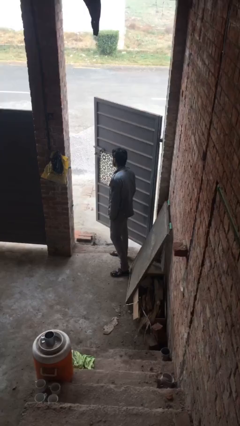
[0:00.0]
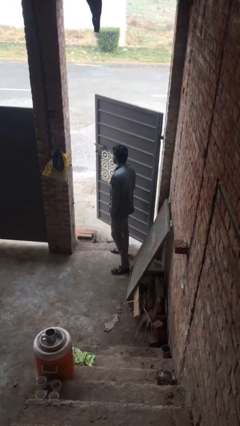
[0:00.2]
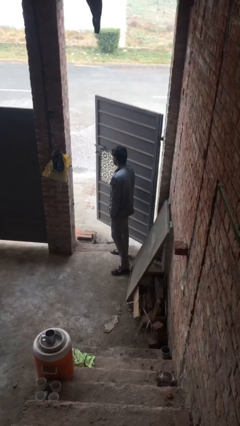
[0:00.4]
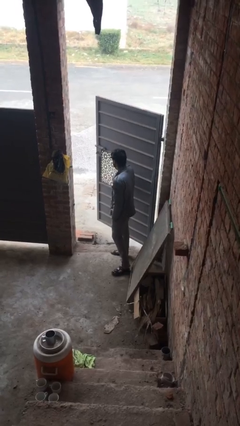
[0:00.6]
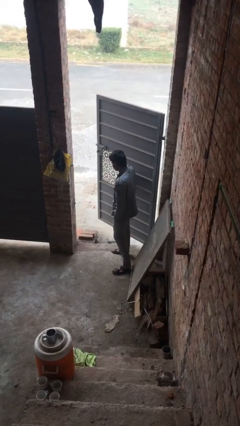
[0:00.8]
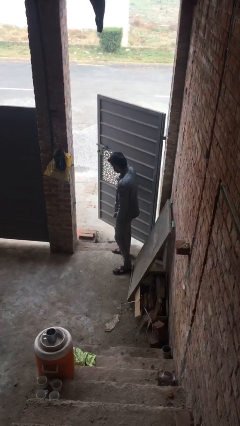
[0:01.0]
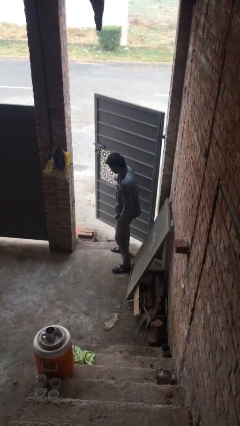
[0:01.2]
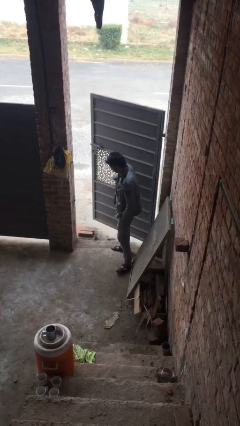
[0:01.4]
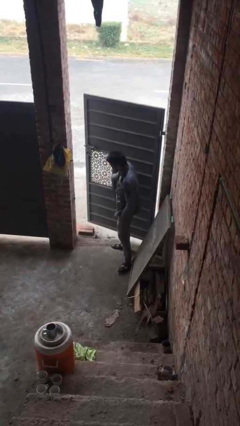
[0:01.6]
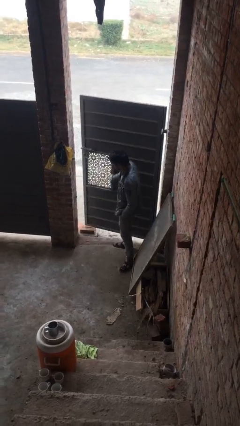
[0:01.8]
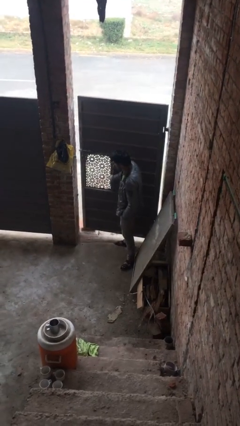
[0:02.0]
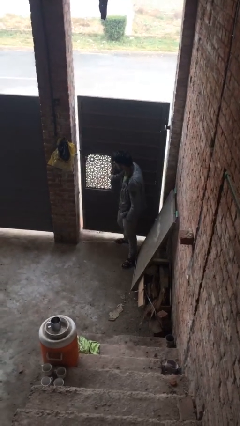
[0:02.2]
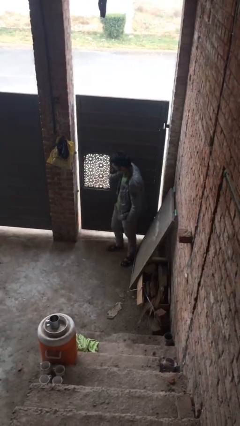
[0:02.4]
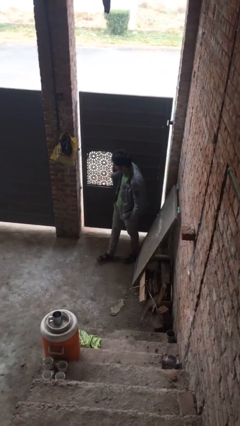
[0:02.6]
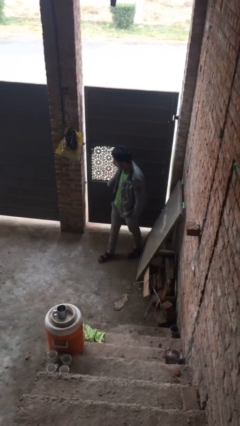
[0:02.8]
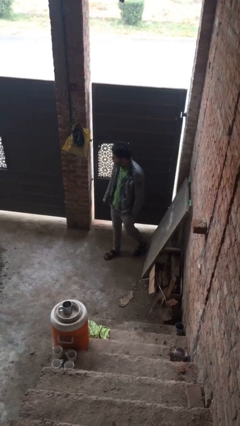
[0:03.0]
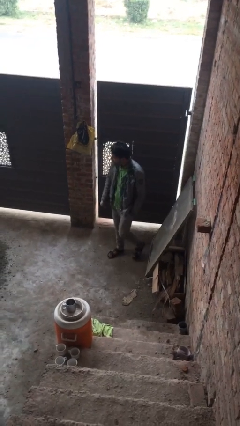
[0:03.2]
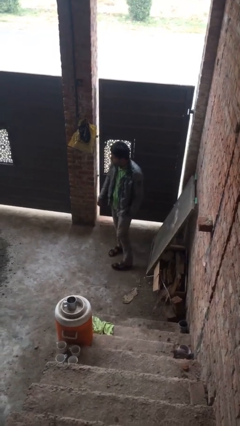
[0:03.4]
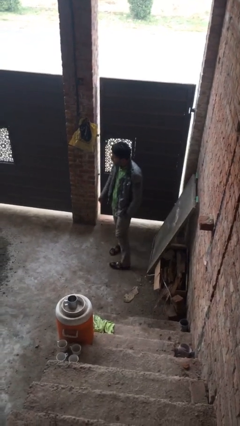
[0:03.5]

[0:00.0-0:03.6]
person closes facility door

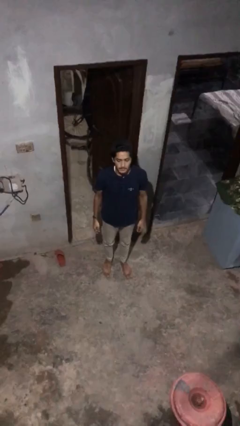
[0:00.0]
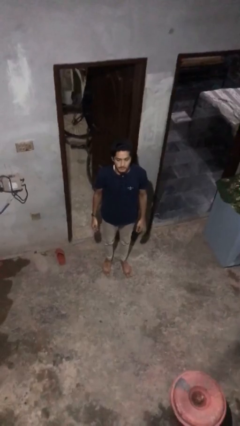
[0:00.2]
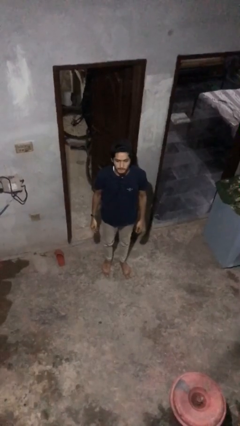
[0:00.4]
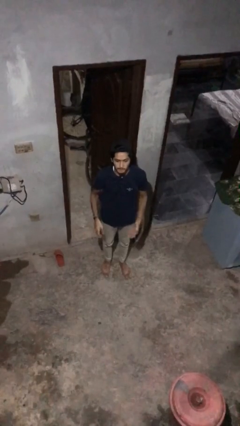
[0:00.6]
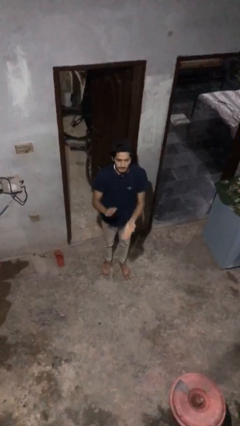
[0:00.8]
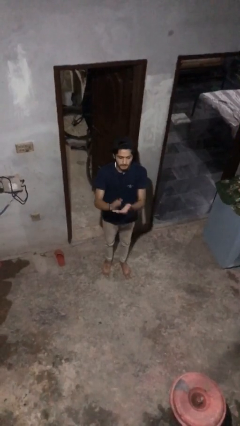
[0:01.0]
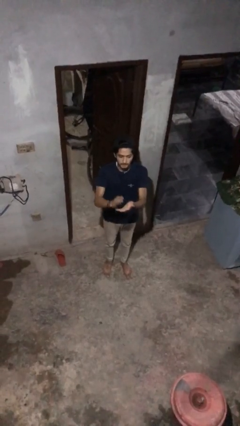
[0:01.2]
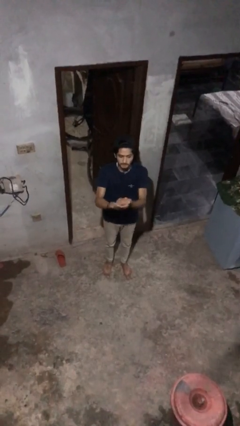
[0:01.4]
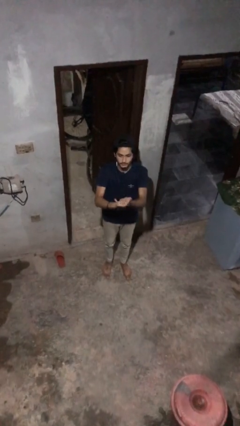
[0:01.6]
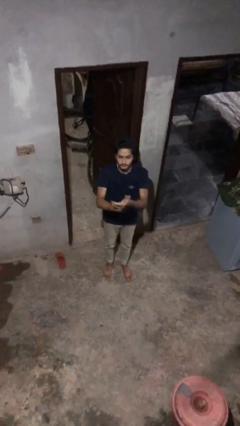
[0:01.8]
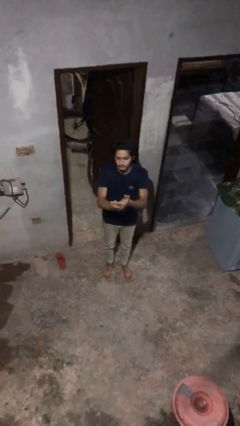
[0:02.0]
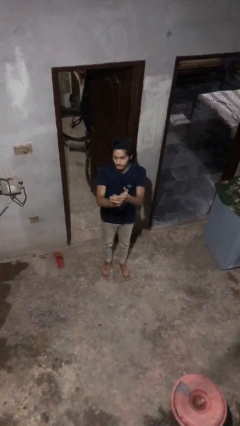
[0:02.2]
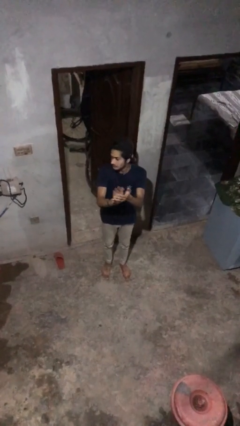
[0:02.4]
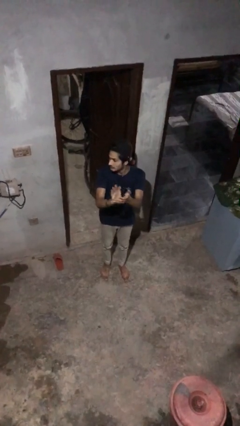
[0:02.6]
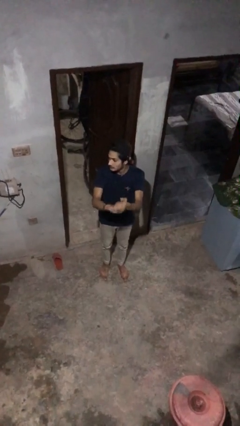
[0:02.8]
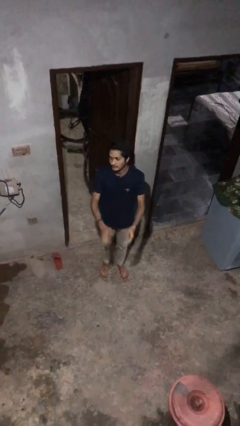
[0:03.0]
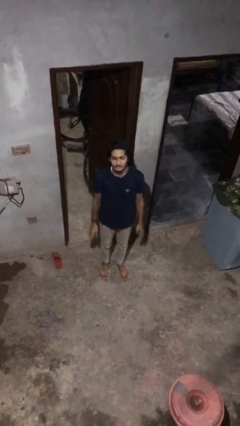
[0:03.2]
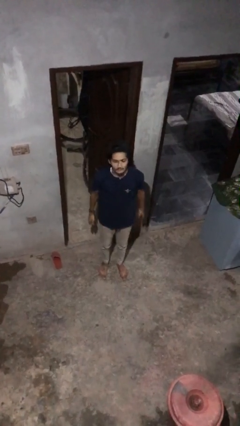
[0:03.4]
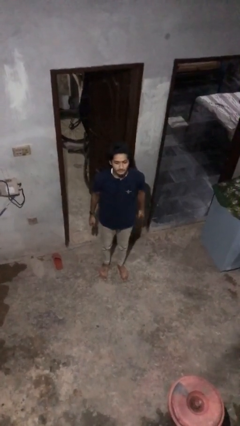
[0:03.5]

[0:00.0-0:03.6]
person claps hands

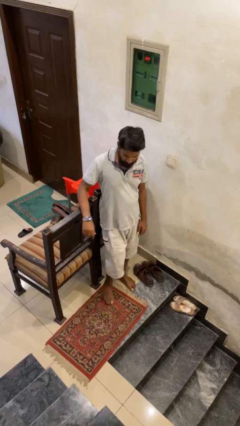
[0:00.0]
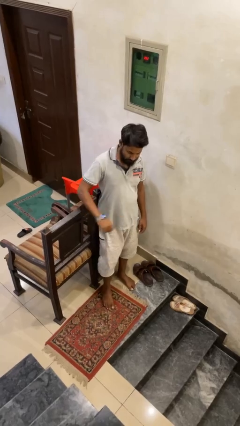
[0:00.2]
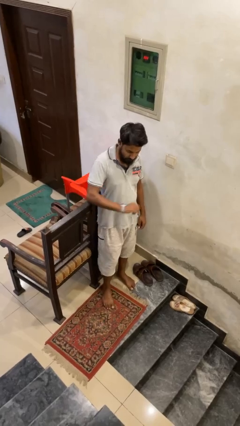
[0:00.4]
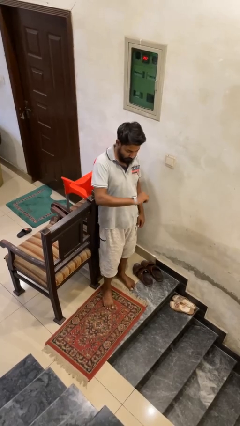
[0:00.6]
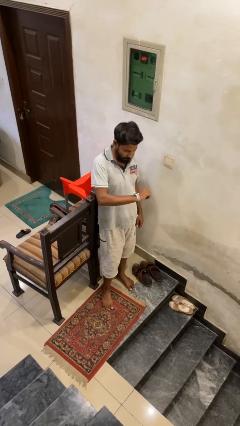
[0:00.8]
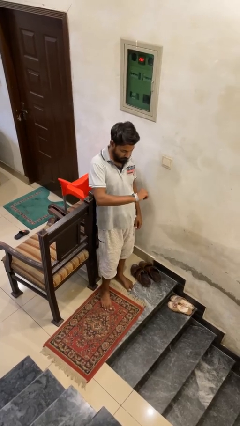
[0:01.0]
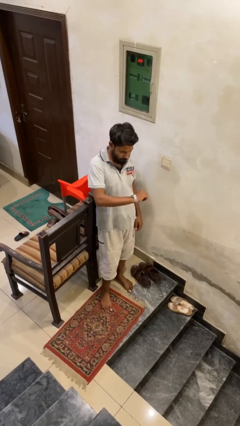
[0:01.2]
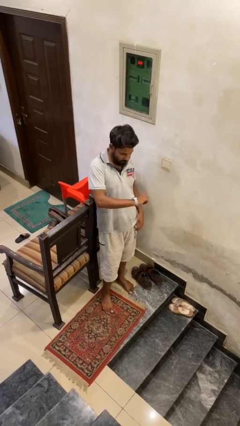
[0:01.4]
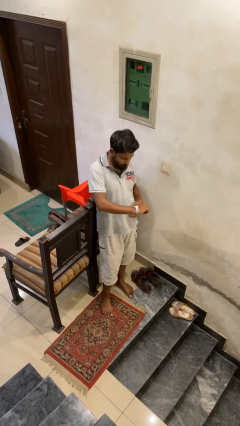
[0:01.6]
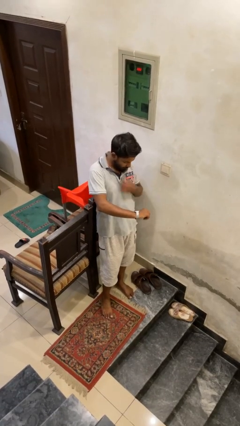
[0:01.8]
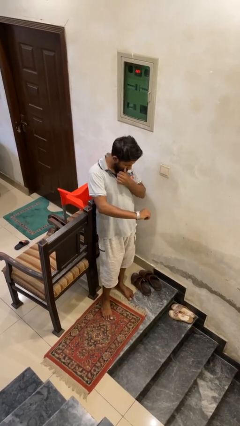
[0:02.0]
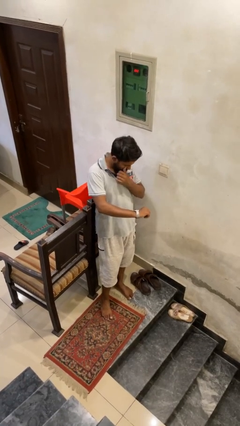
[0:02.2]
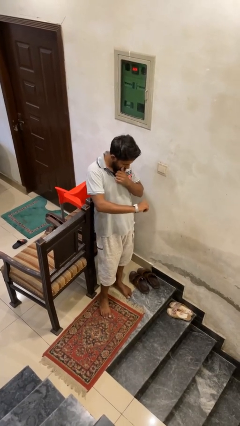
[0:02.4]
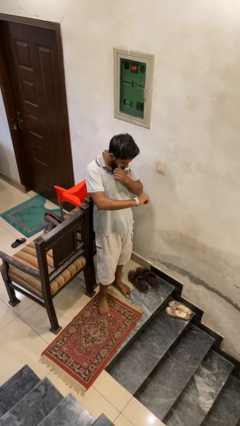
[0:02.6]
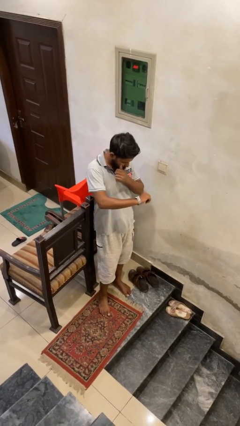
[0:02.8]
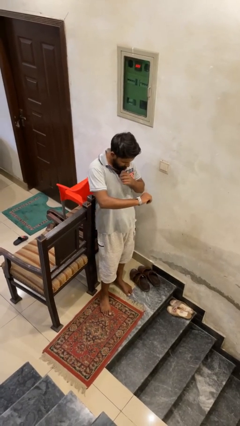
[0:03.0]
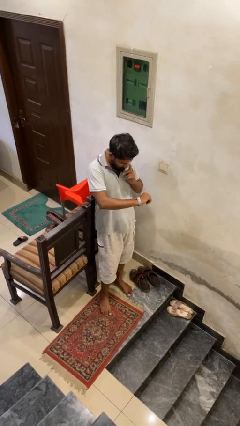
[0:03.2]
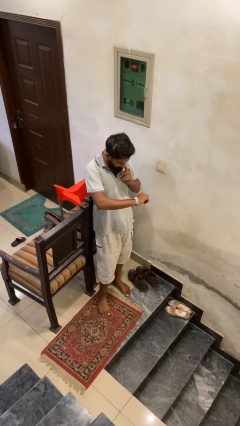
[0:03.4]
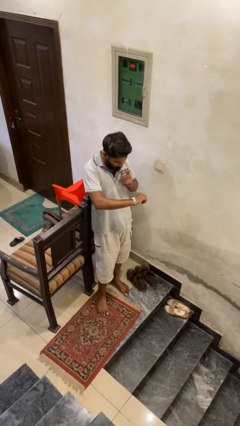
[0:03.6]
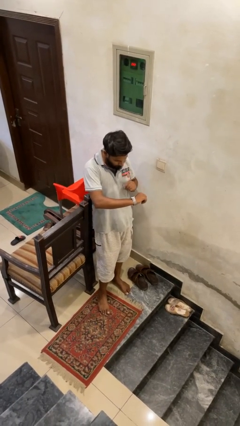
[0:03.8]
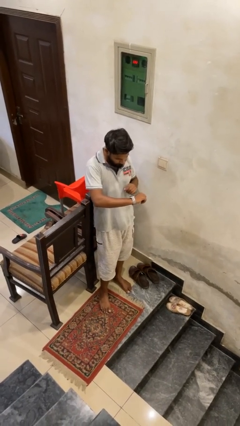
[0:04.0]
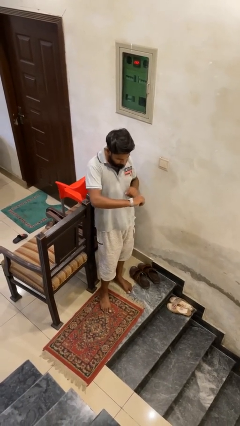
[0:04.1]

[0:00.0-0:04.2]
person looks at wristwatch

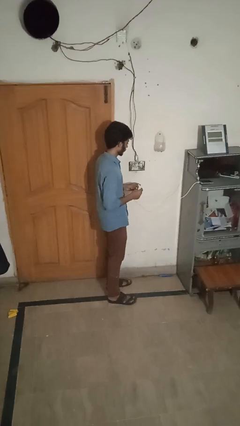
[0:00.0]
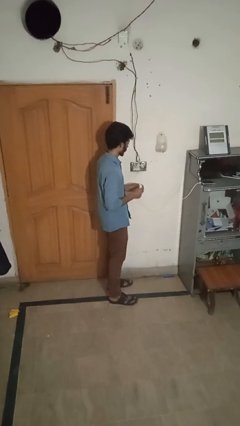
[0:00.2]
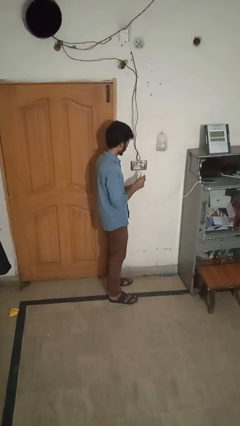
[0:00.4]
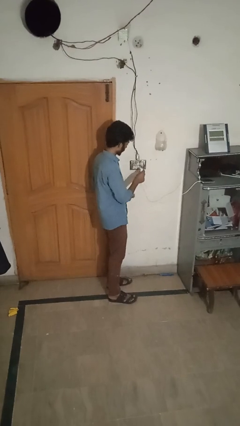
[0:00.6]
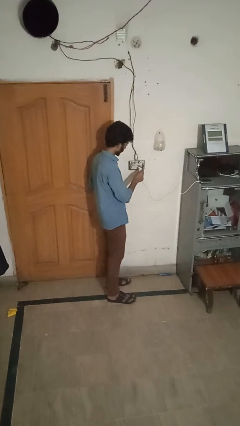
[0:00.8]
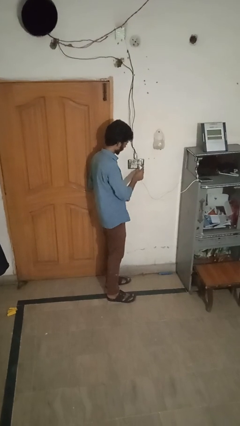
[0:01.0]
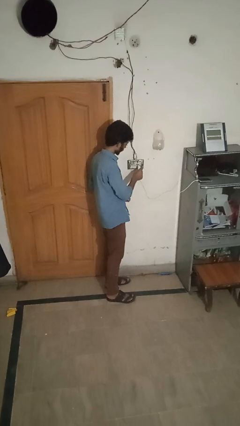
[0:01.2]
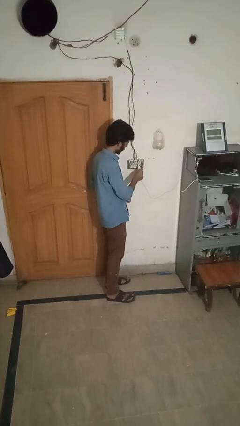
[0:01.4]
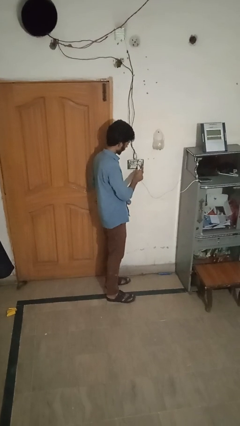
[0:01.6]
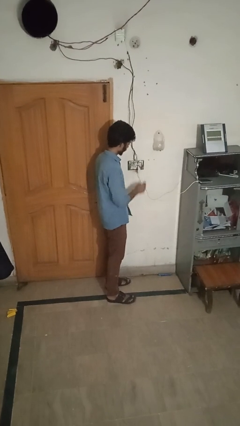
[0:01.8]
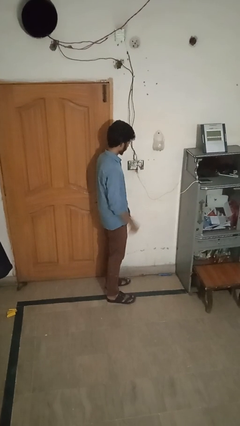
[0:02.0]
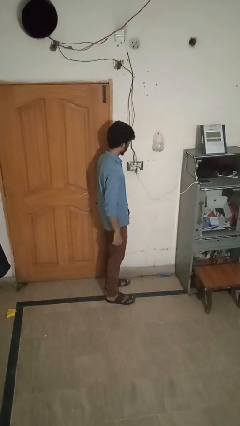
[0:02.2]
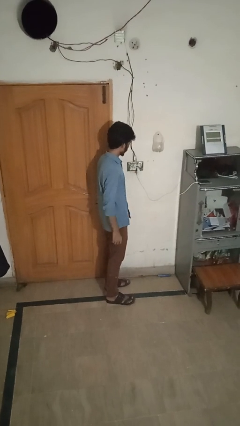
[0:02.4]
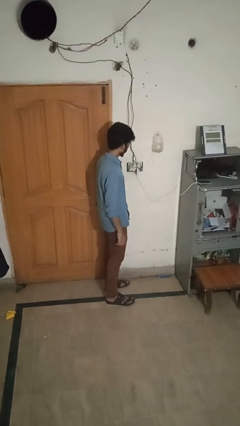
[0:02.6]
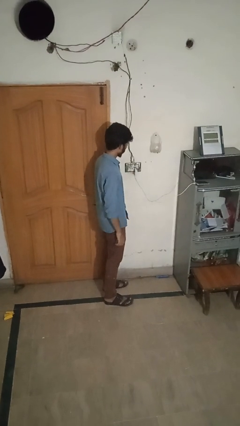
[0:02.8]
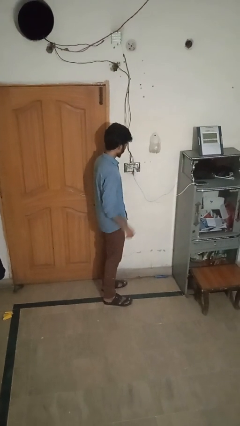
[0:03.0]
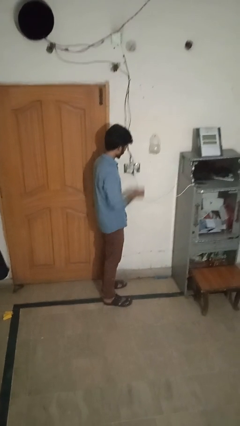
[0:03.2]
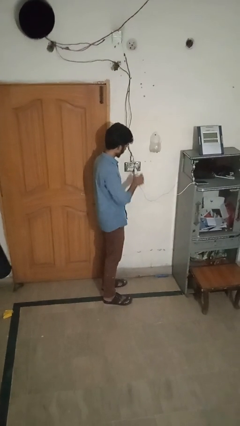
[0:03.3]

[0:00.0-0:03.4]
person plugs into electrical socket

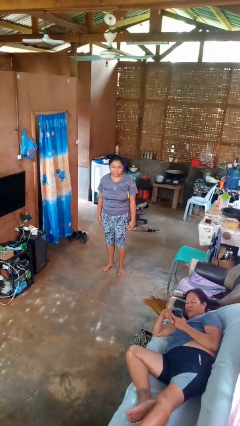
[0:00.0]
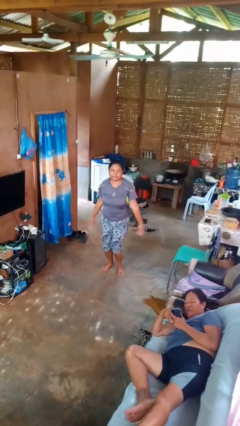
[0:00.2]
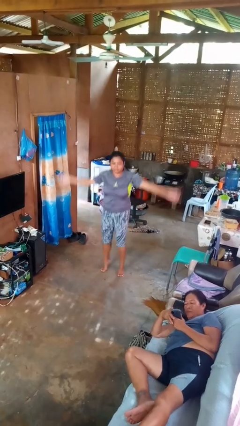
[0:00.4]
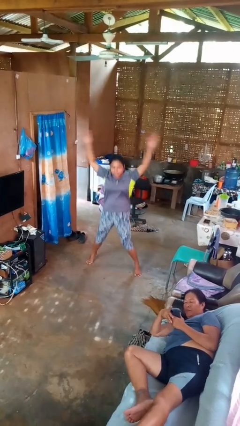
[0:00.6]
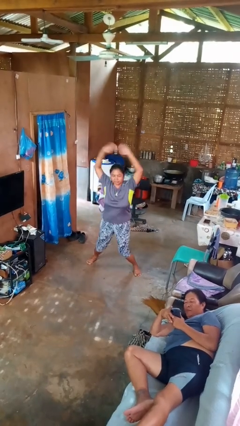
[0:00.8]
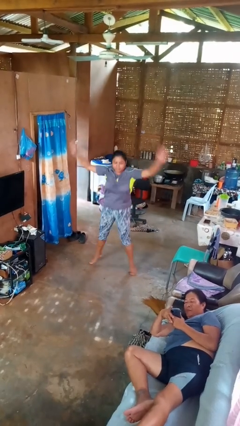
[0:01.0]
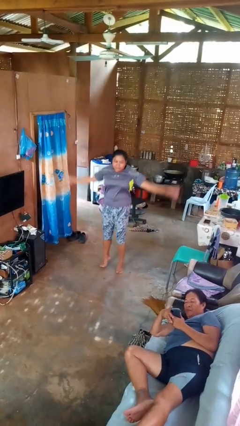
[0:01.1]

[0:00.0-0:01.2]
person exercises with jumping jacks

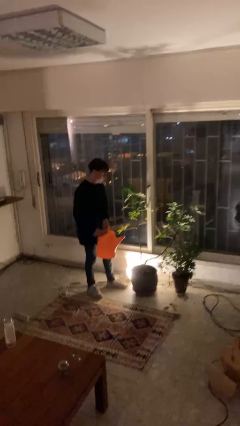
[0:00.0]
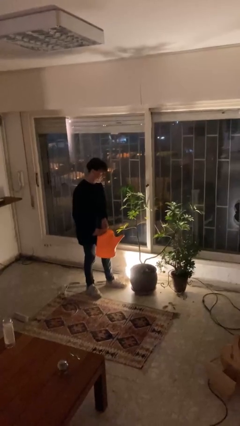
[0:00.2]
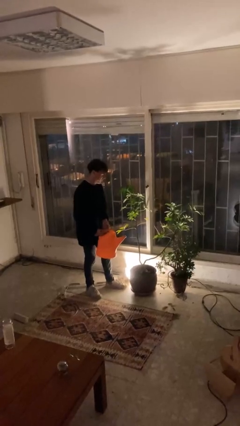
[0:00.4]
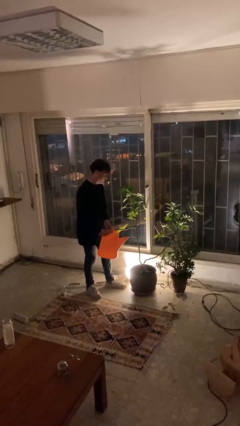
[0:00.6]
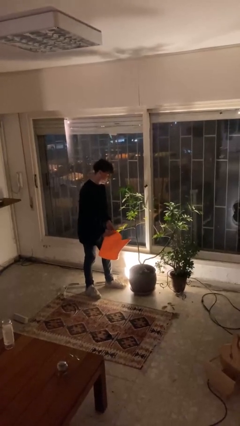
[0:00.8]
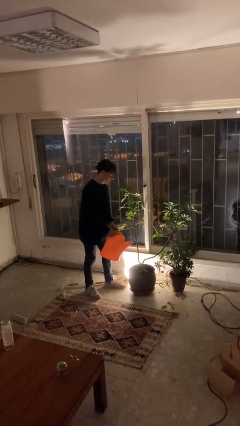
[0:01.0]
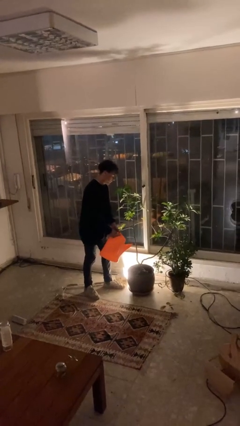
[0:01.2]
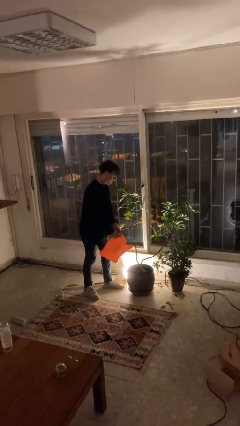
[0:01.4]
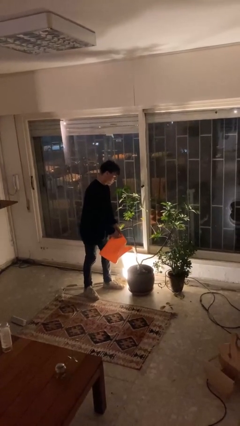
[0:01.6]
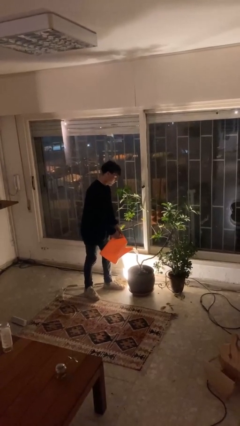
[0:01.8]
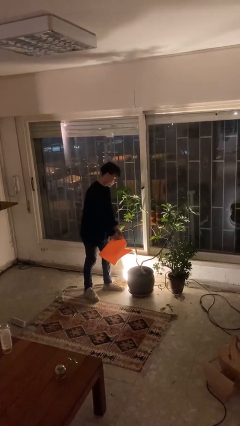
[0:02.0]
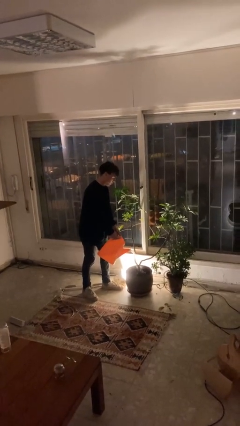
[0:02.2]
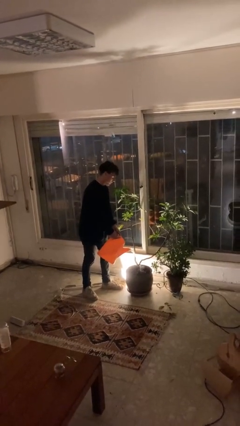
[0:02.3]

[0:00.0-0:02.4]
person waters houseplant
